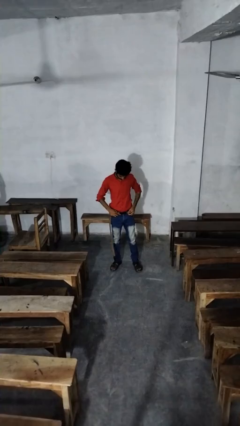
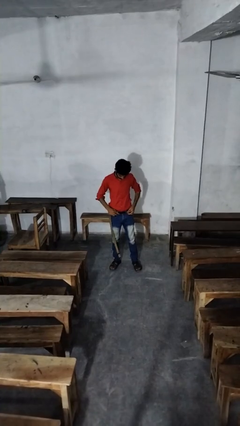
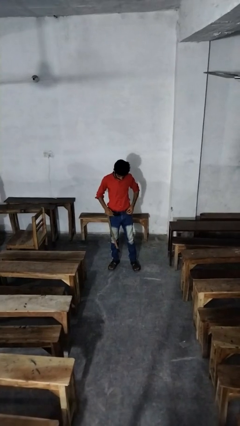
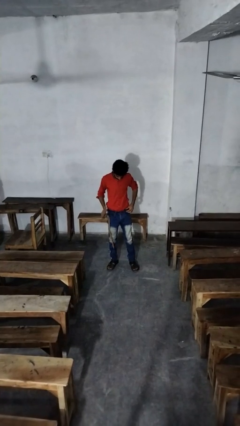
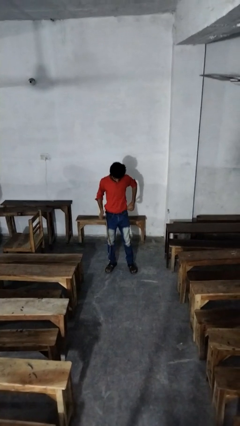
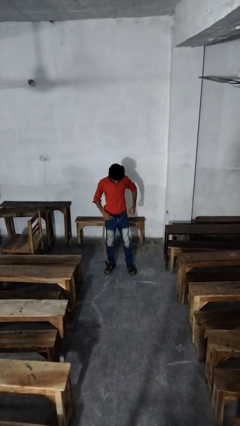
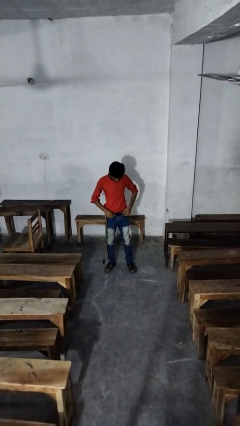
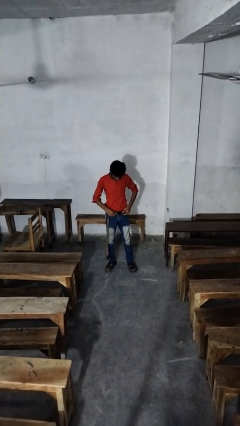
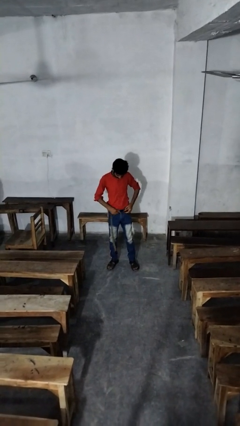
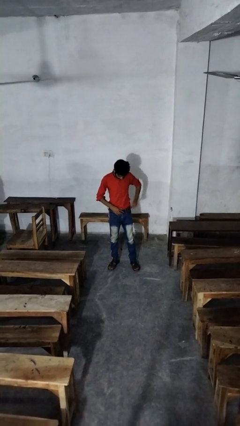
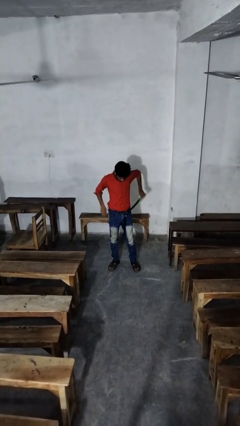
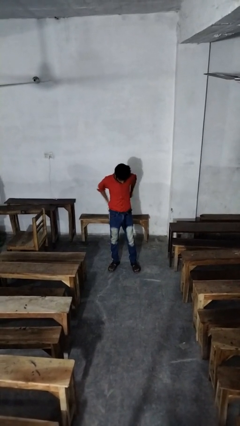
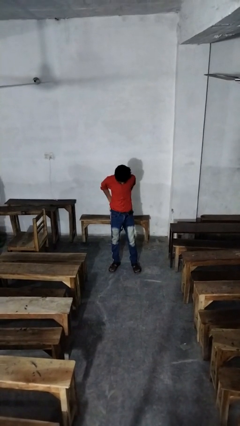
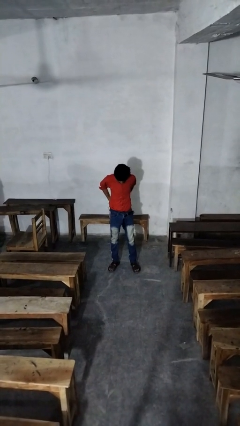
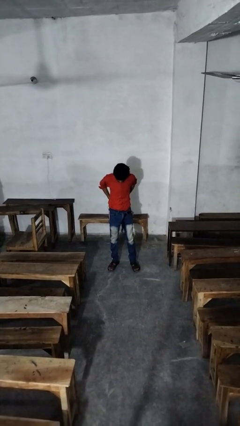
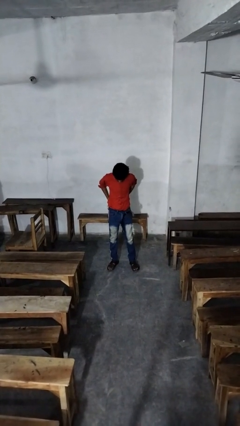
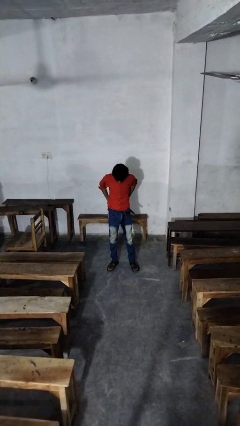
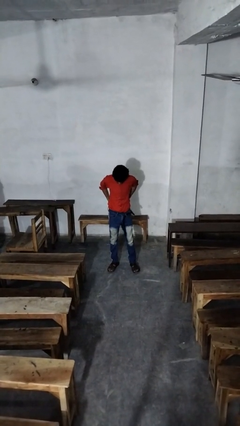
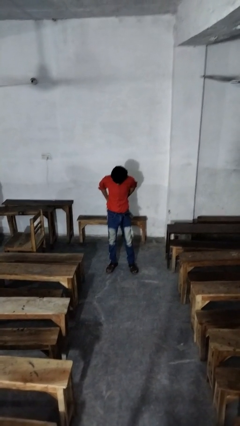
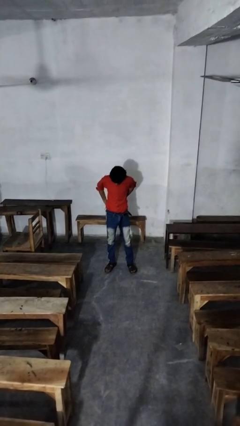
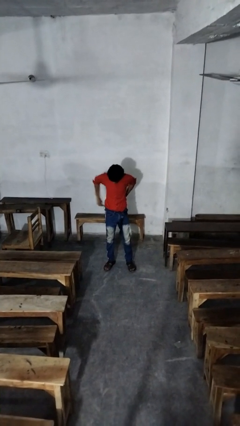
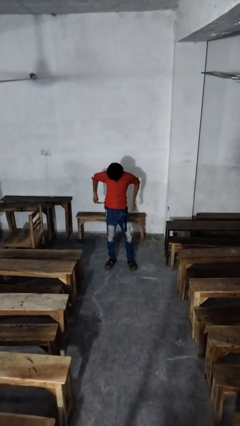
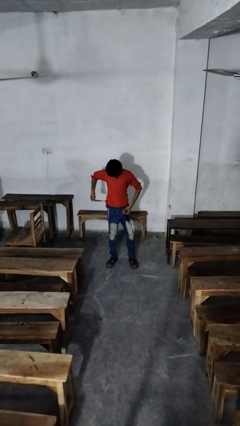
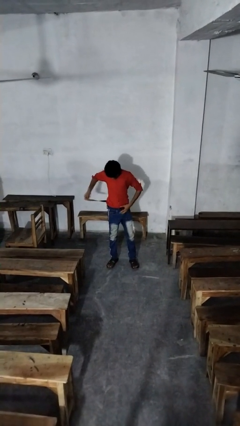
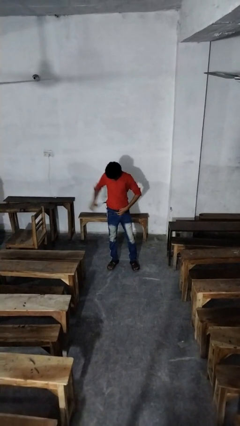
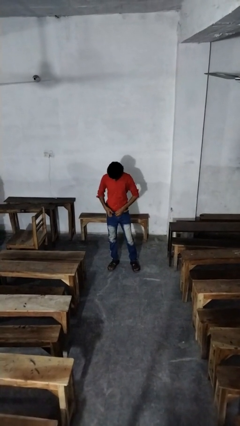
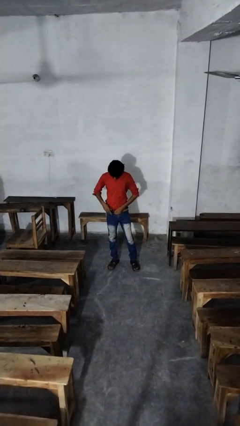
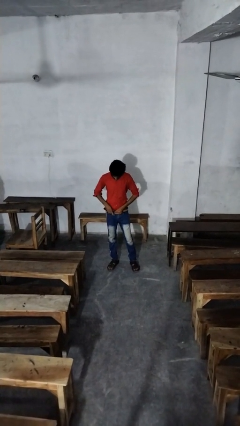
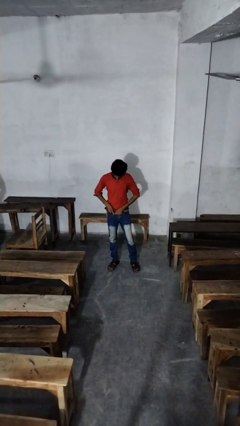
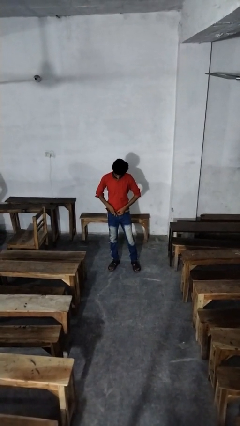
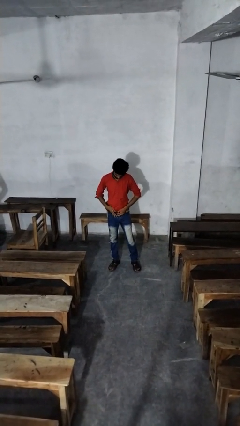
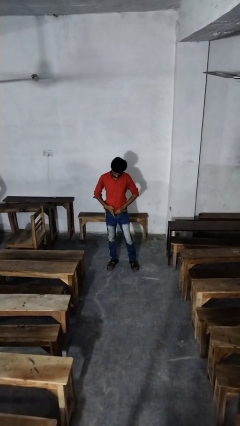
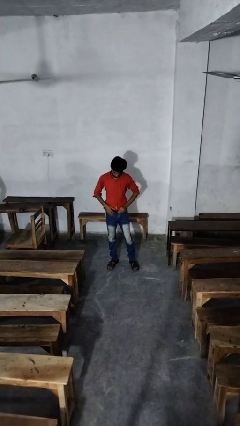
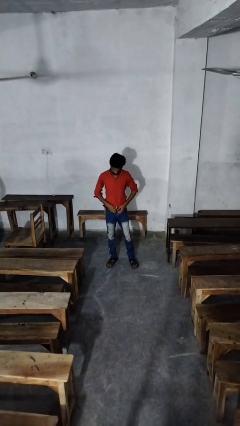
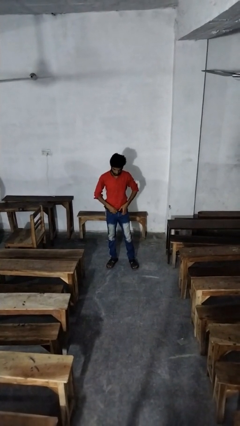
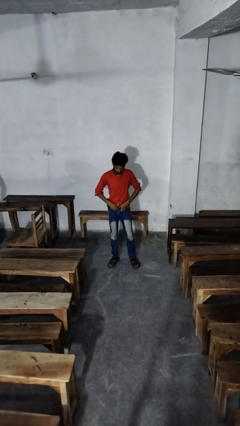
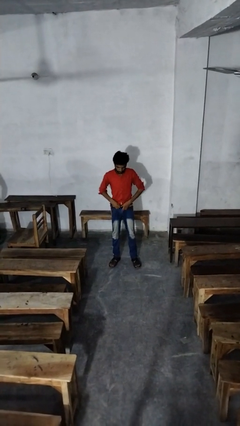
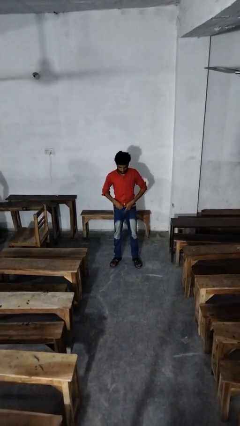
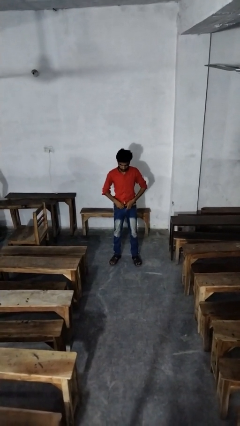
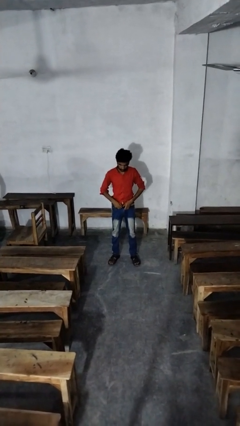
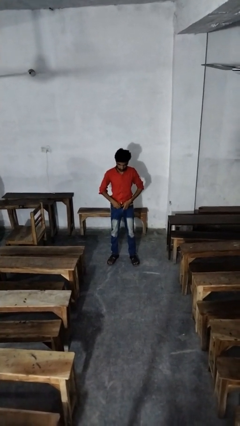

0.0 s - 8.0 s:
person puts on belt

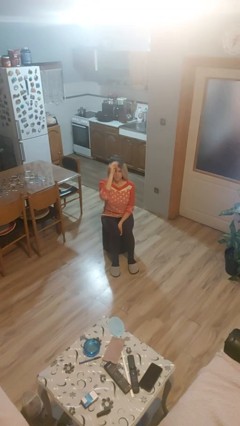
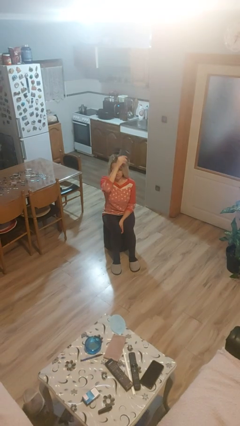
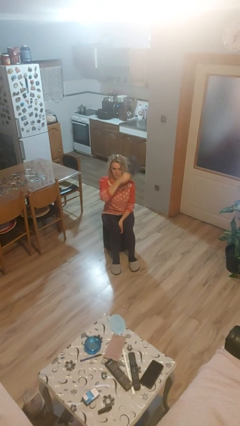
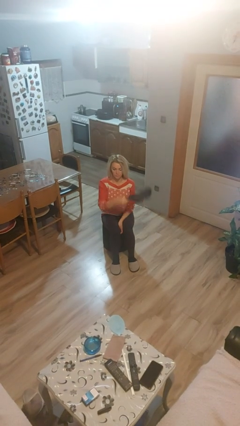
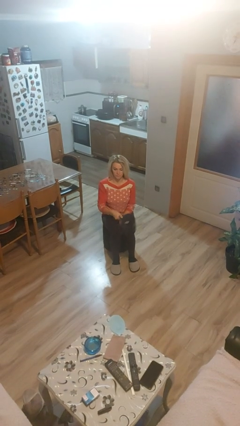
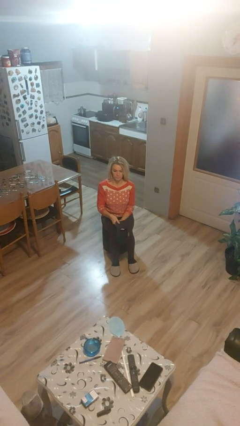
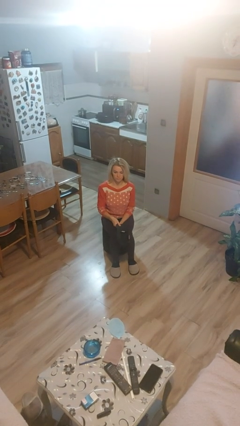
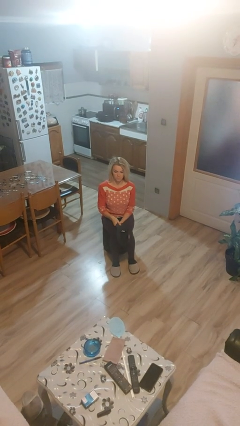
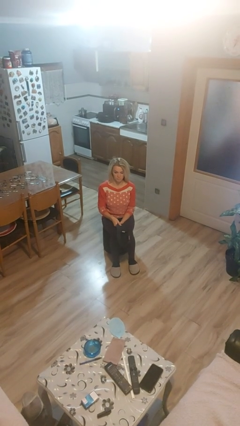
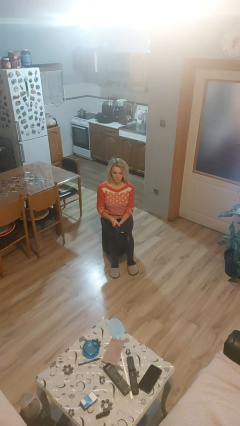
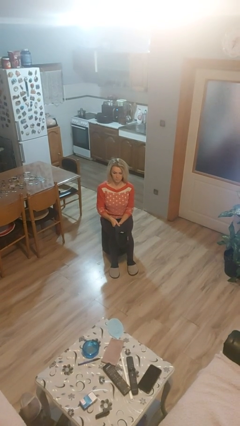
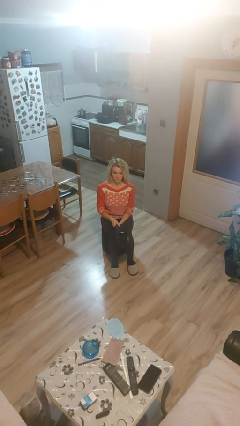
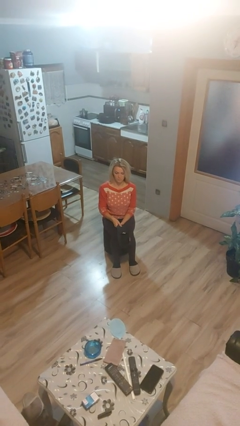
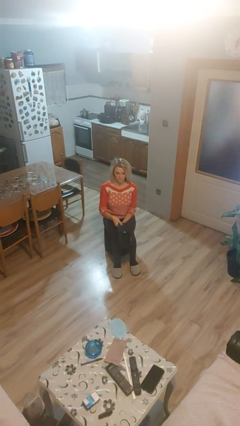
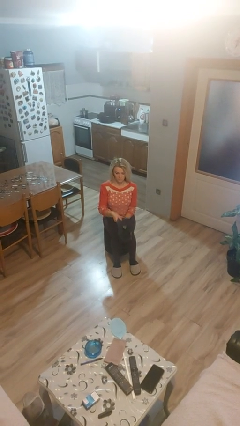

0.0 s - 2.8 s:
person takes off hat

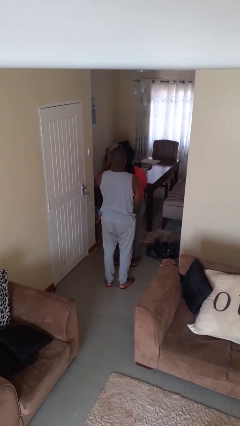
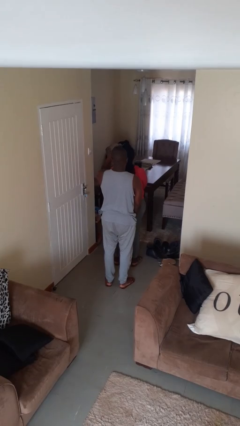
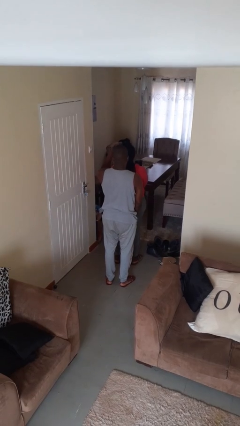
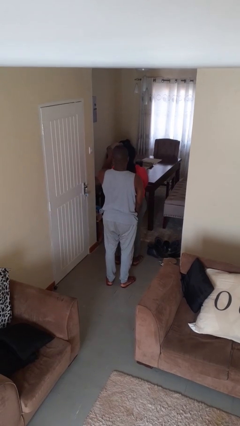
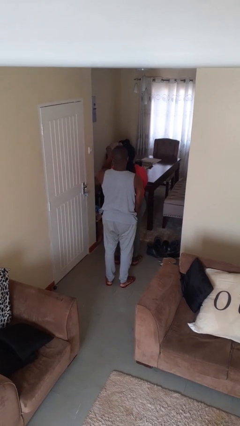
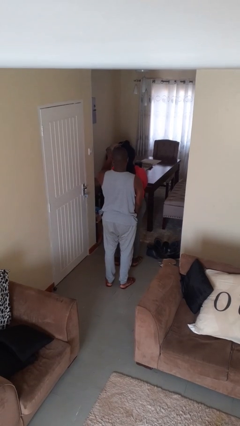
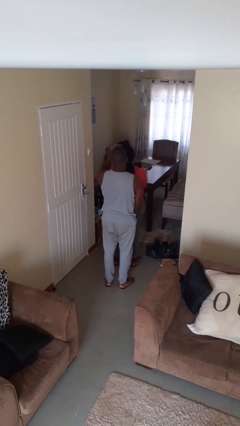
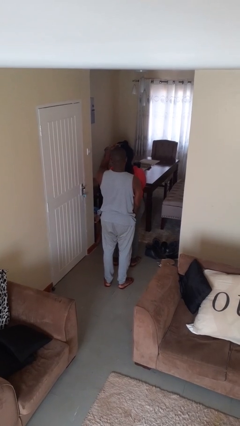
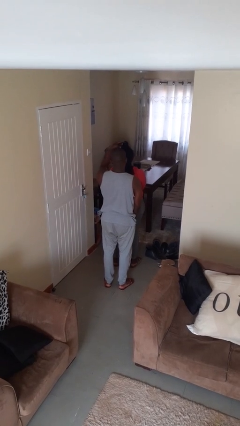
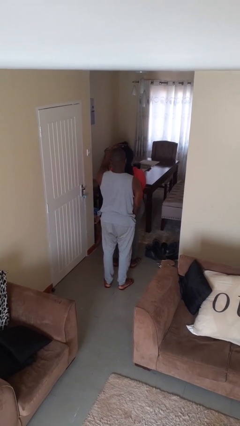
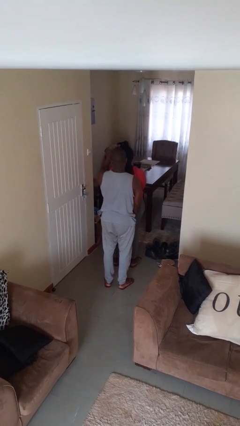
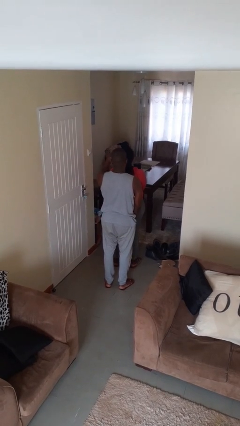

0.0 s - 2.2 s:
person brushes hair of person

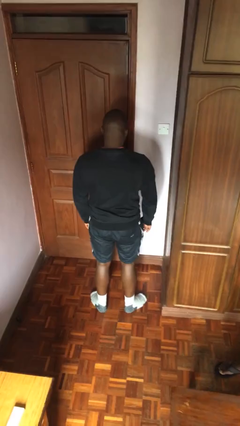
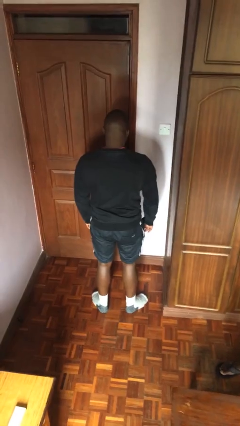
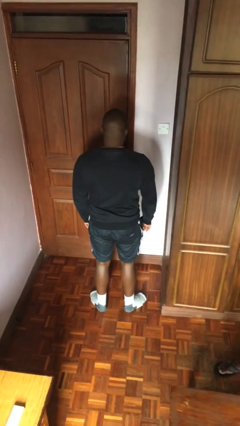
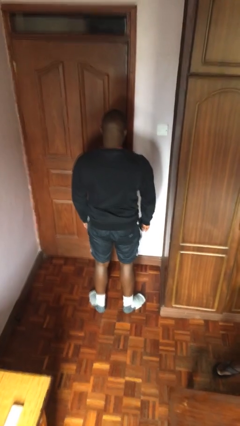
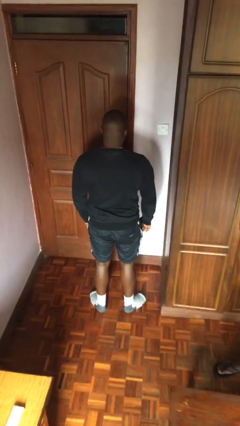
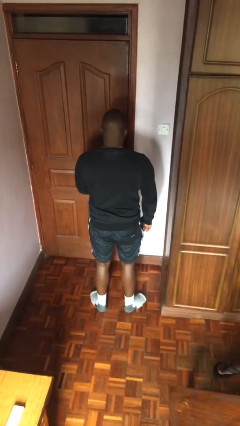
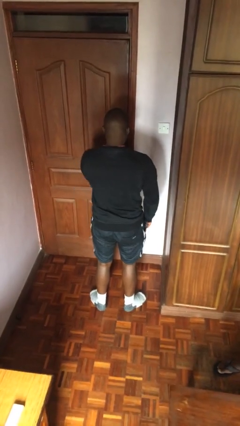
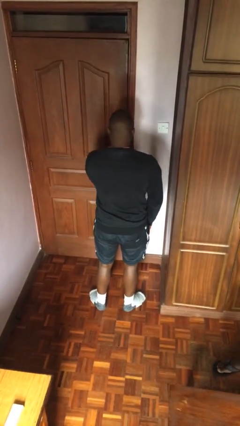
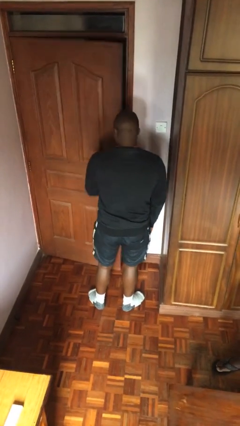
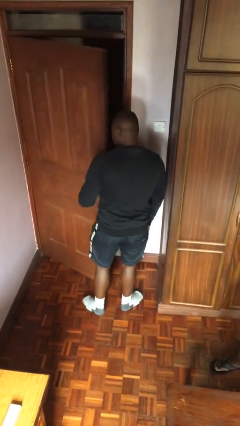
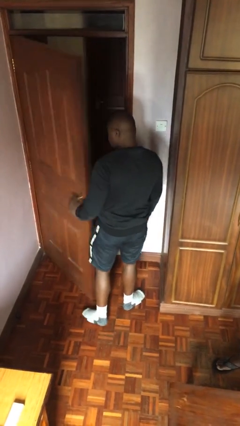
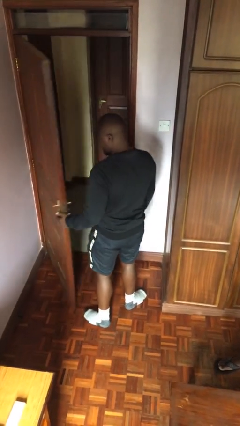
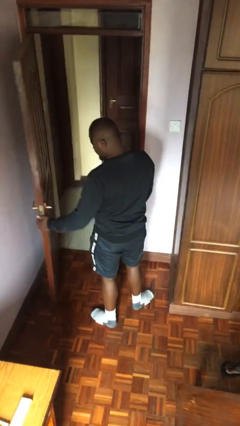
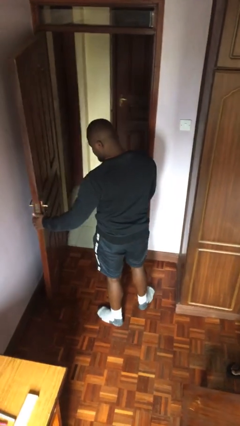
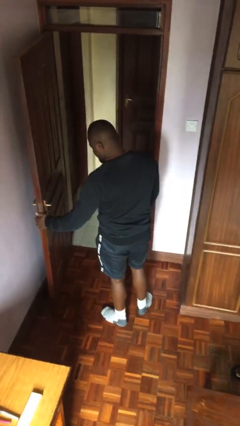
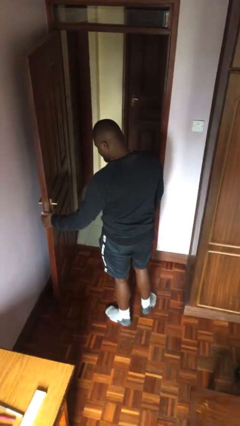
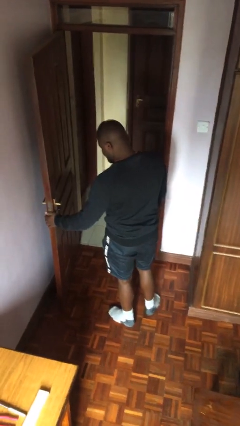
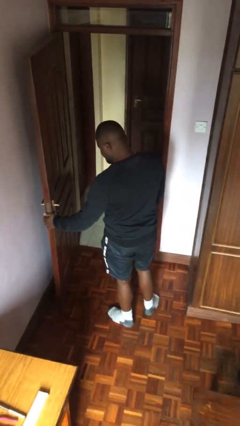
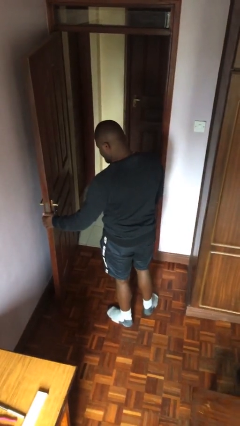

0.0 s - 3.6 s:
person opens facility door

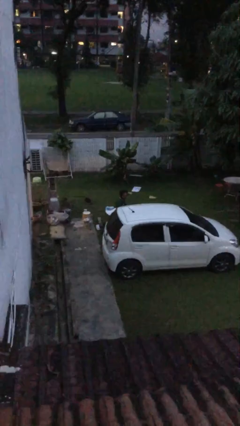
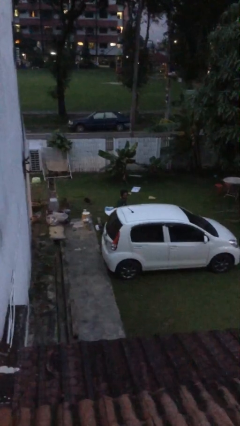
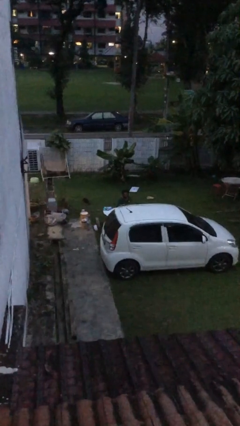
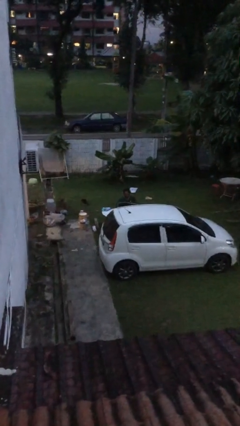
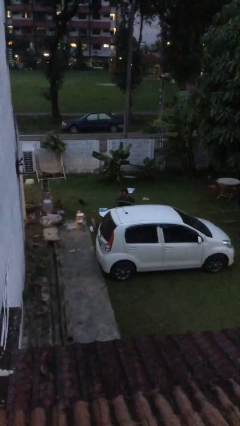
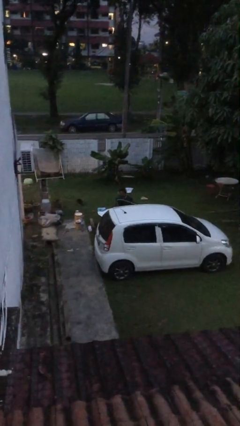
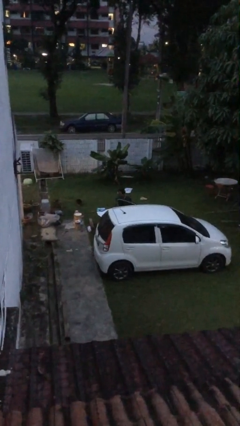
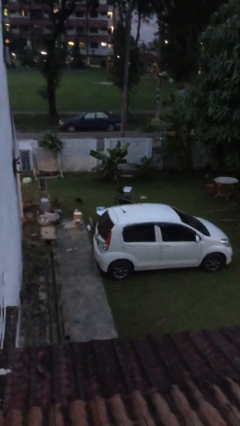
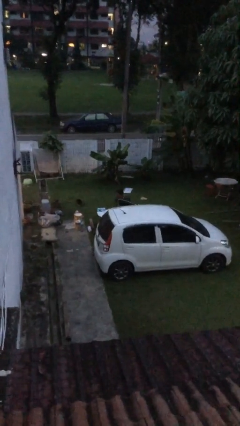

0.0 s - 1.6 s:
person opens car door
